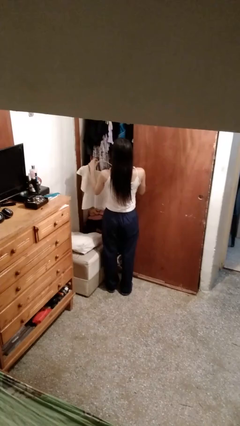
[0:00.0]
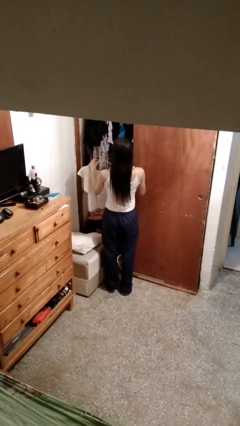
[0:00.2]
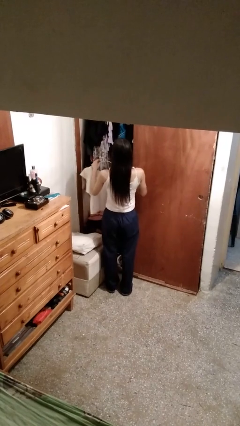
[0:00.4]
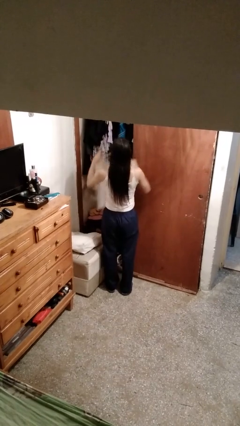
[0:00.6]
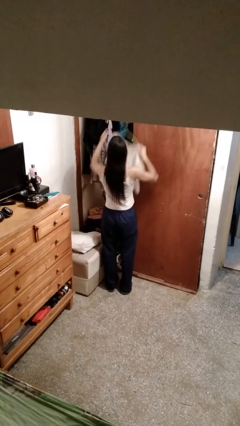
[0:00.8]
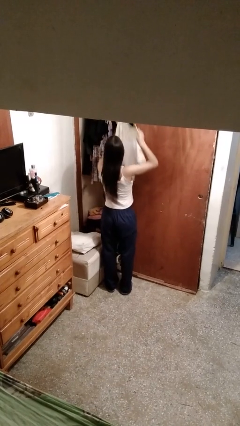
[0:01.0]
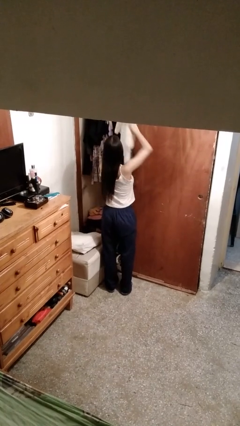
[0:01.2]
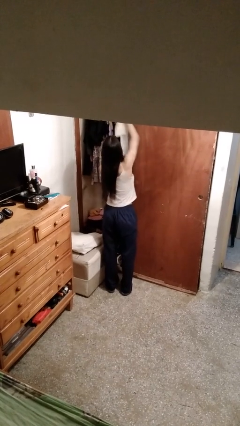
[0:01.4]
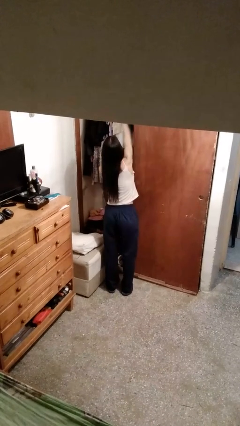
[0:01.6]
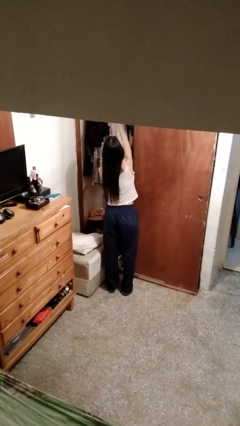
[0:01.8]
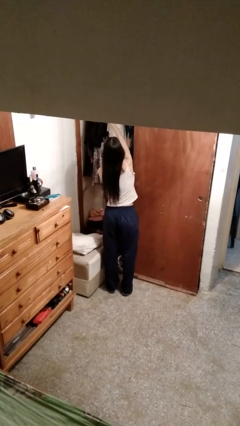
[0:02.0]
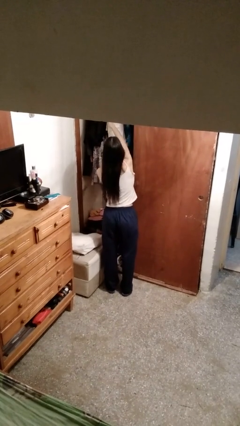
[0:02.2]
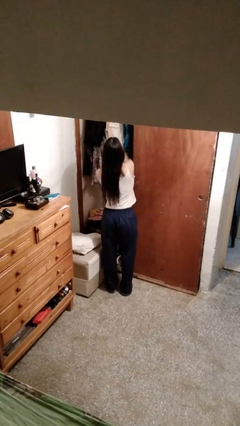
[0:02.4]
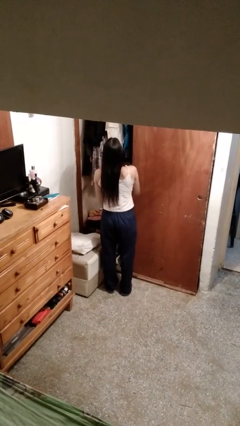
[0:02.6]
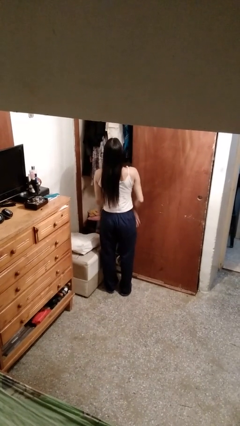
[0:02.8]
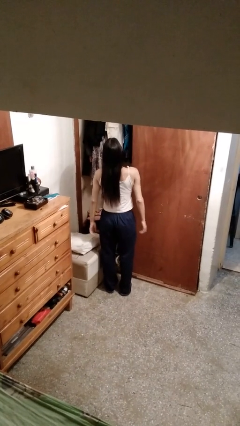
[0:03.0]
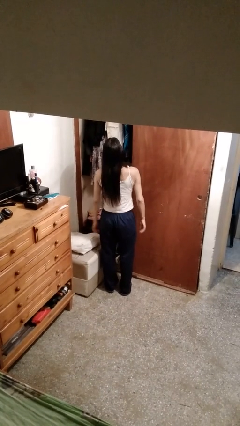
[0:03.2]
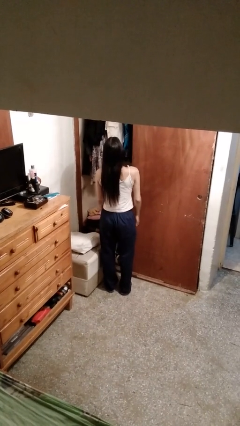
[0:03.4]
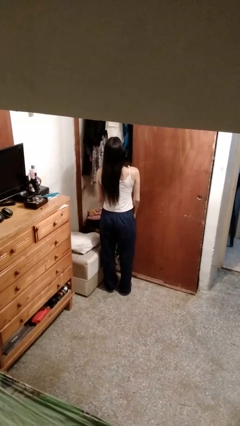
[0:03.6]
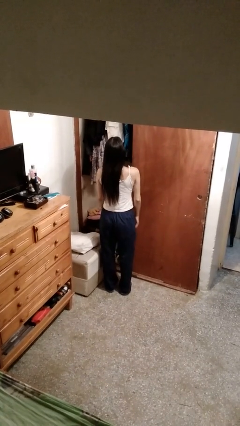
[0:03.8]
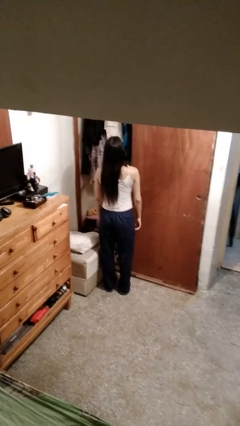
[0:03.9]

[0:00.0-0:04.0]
person puts clothes into closet

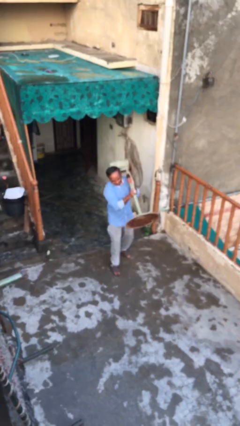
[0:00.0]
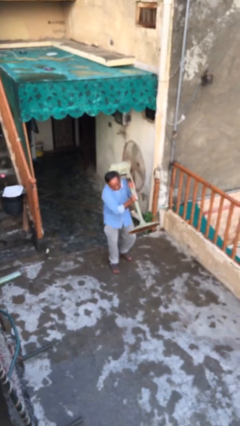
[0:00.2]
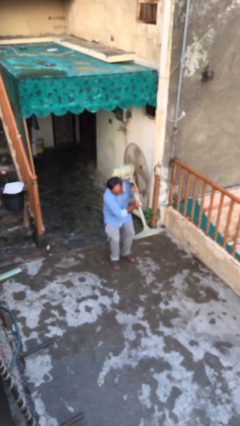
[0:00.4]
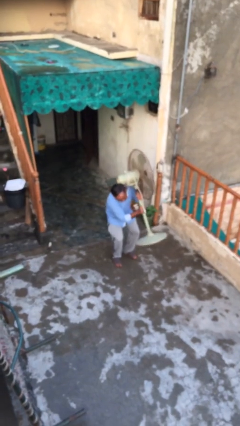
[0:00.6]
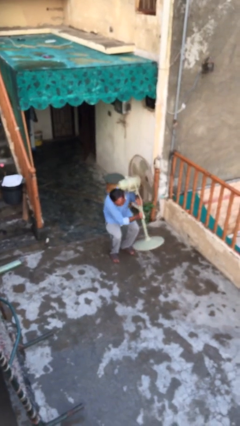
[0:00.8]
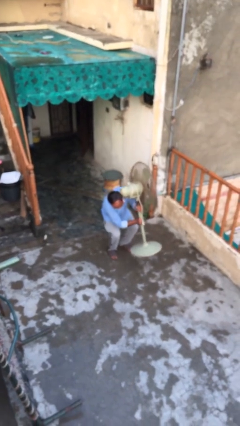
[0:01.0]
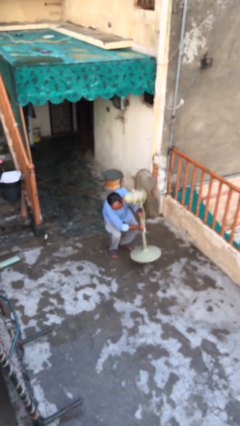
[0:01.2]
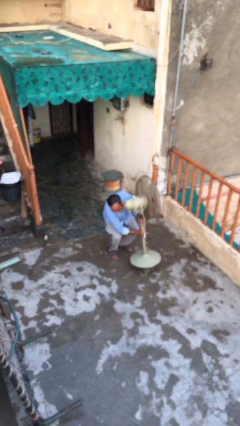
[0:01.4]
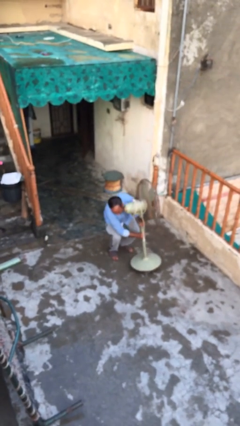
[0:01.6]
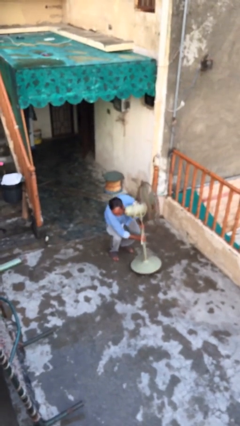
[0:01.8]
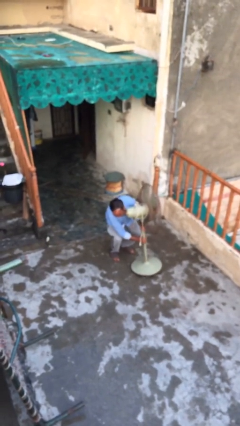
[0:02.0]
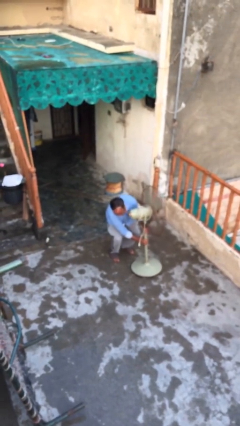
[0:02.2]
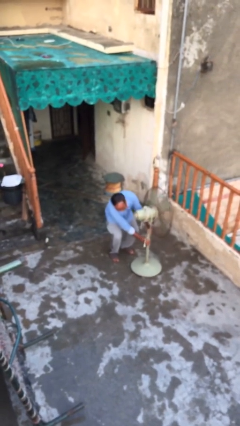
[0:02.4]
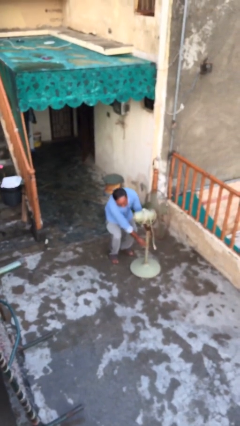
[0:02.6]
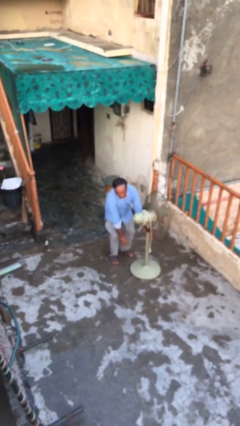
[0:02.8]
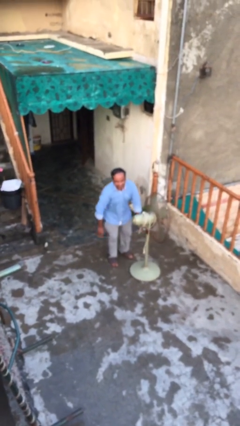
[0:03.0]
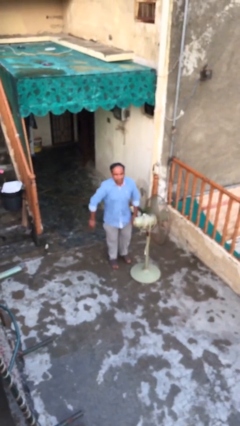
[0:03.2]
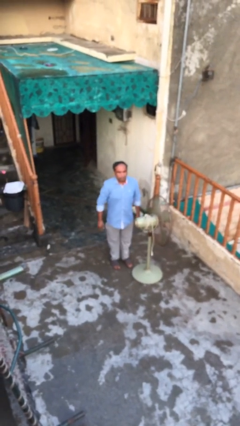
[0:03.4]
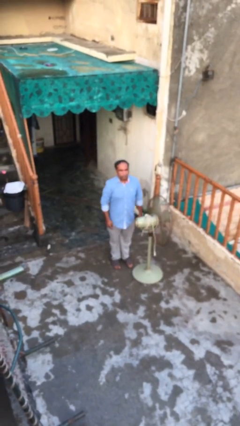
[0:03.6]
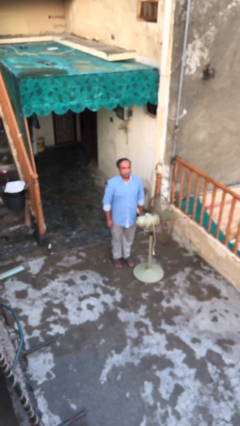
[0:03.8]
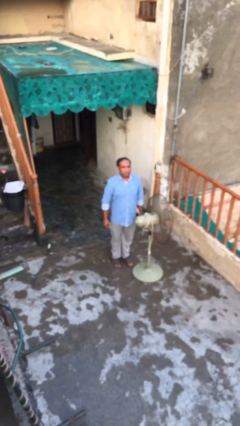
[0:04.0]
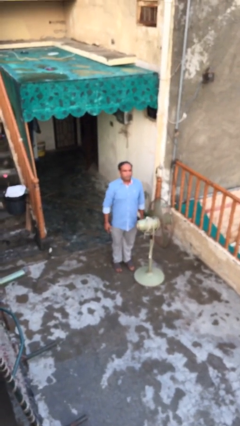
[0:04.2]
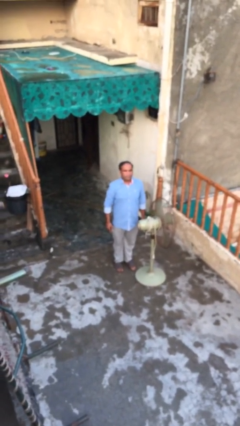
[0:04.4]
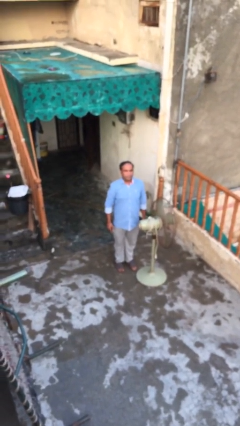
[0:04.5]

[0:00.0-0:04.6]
person puts down object on floor

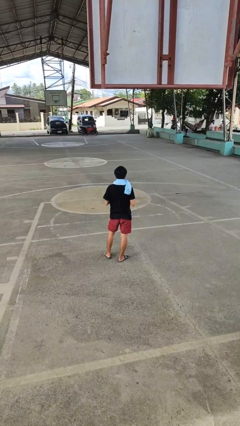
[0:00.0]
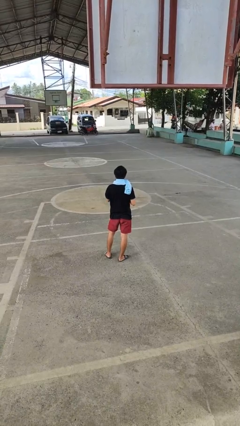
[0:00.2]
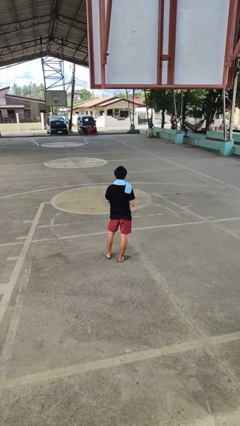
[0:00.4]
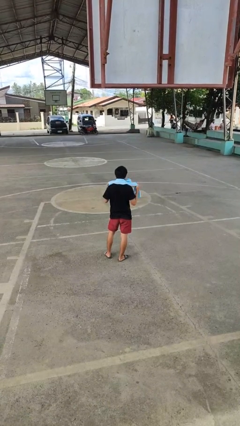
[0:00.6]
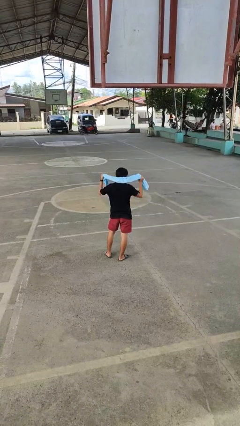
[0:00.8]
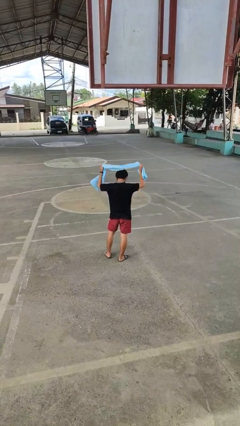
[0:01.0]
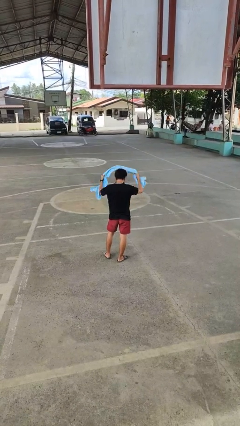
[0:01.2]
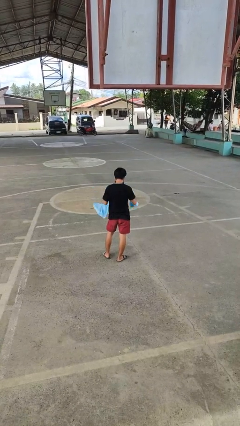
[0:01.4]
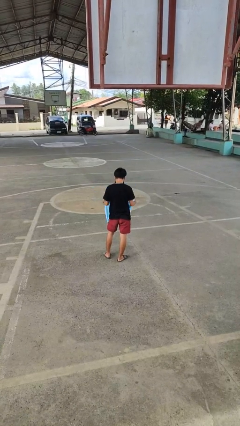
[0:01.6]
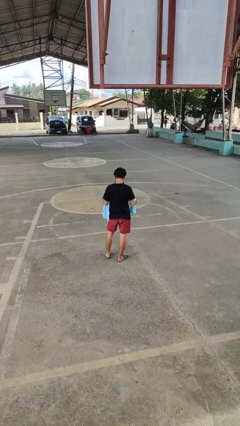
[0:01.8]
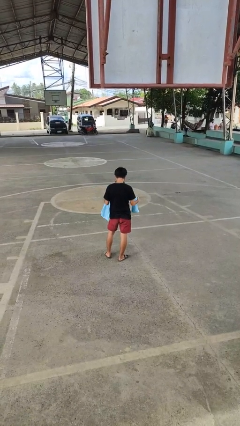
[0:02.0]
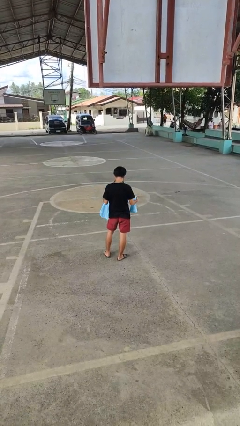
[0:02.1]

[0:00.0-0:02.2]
person takes off scarf

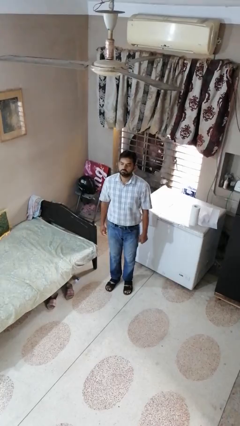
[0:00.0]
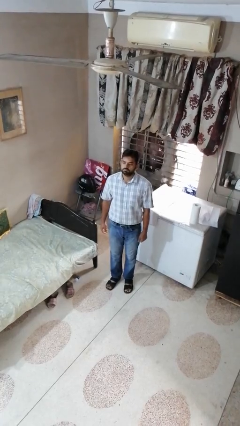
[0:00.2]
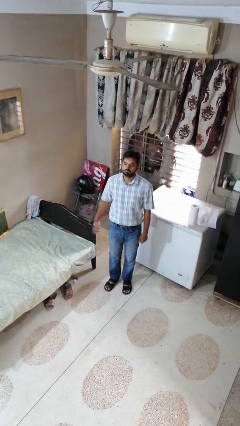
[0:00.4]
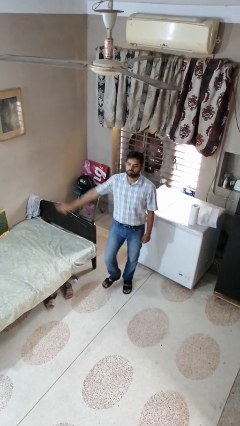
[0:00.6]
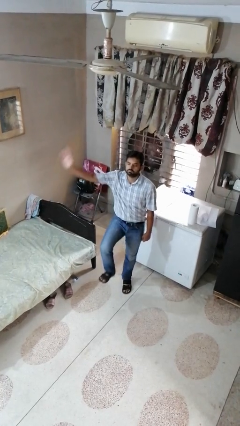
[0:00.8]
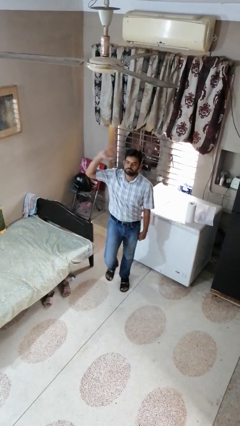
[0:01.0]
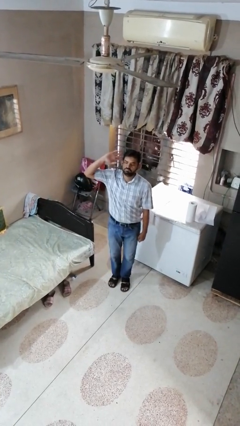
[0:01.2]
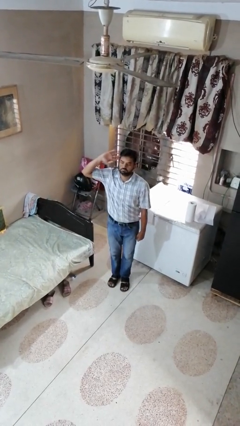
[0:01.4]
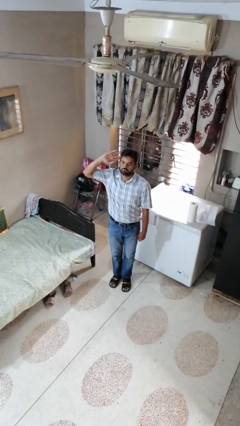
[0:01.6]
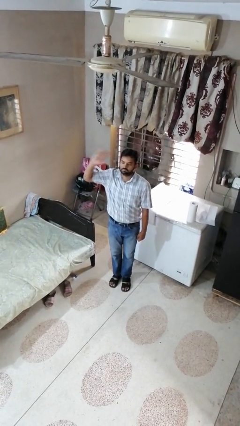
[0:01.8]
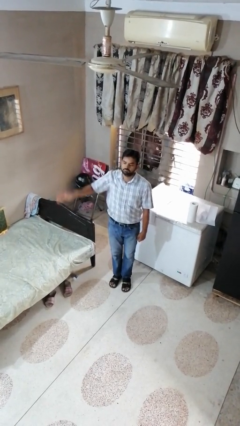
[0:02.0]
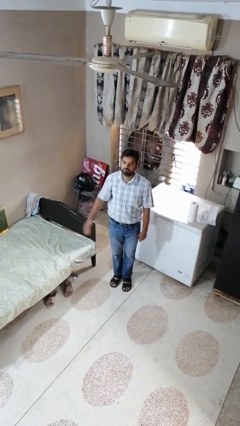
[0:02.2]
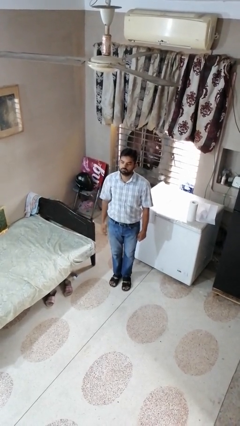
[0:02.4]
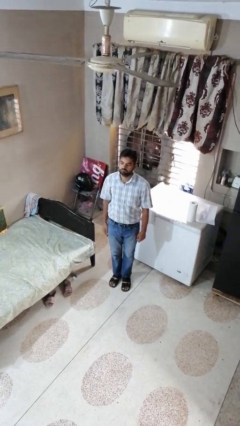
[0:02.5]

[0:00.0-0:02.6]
person salutes

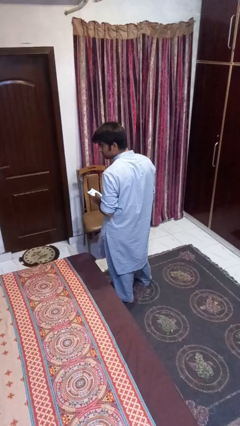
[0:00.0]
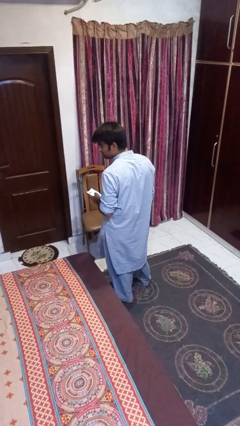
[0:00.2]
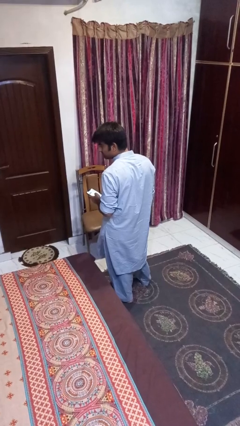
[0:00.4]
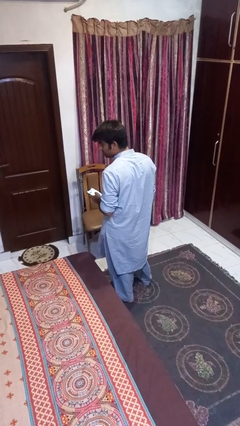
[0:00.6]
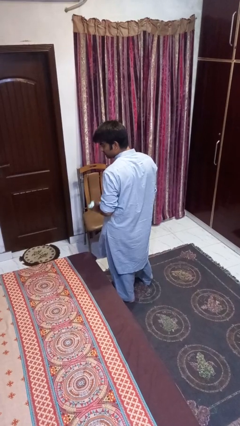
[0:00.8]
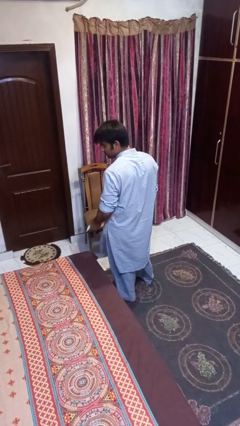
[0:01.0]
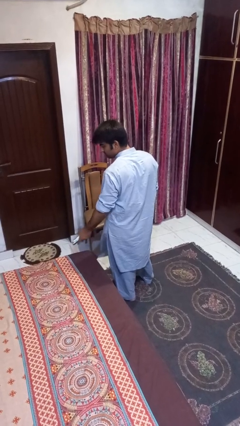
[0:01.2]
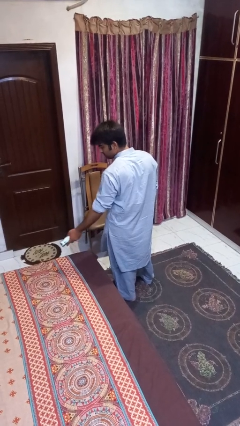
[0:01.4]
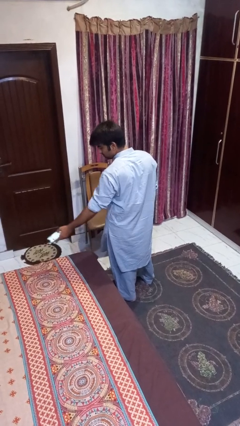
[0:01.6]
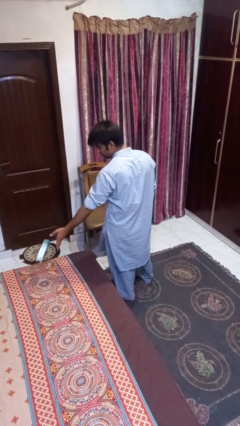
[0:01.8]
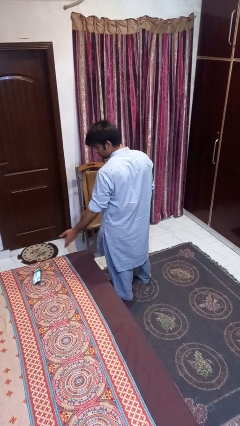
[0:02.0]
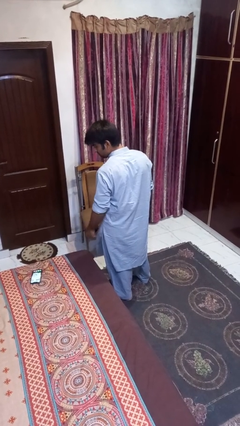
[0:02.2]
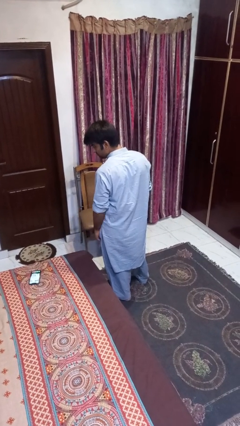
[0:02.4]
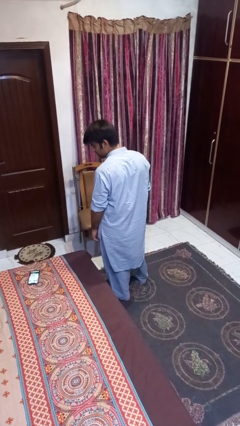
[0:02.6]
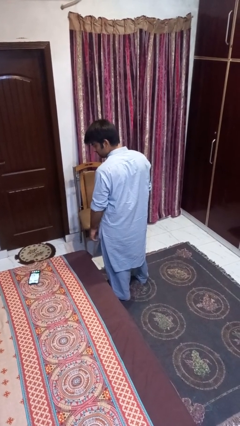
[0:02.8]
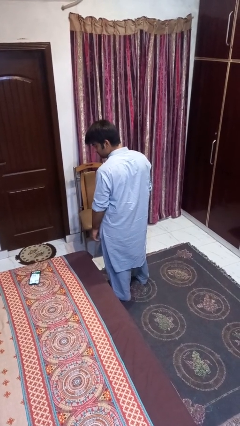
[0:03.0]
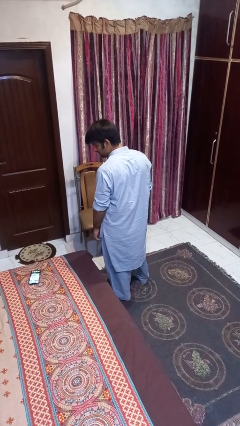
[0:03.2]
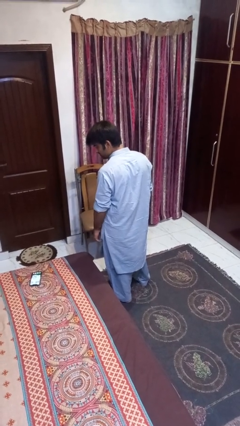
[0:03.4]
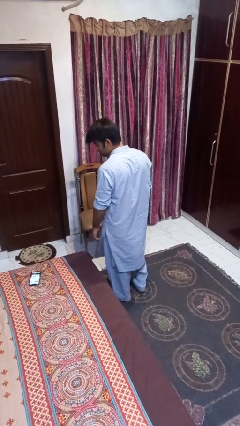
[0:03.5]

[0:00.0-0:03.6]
person throws object on bed

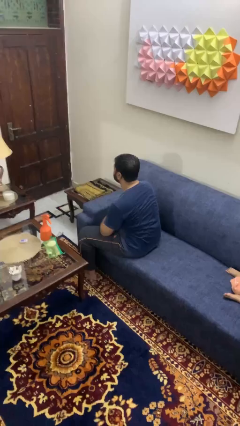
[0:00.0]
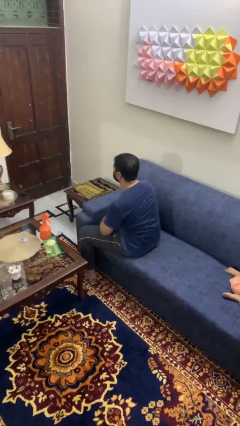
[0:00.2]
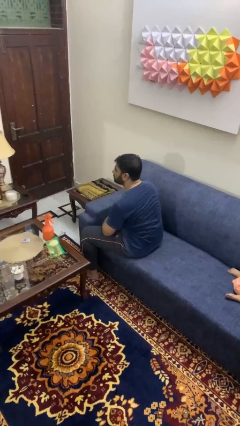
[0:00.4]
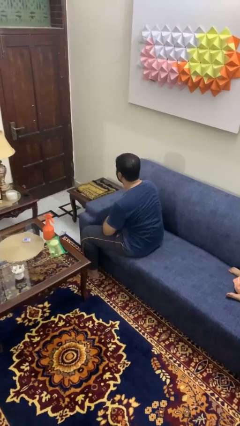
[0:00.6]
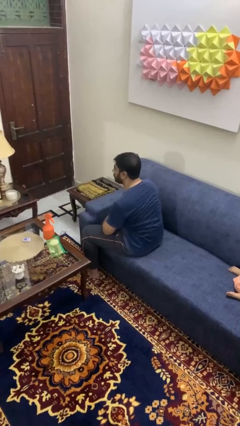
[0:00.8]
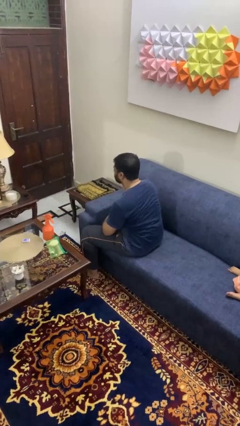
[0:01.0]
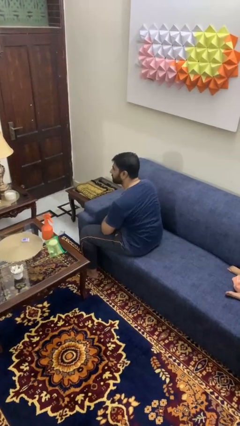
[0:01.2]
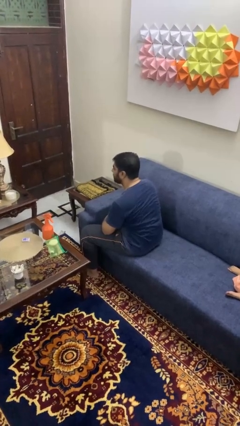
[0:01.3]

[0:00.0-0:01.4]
person shakes head
